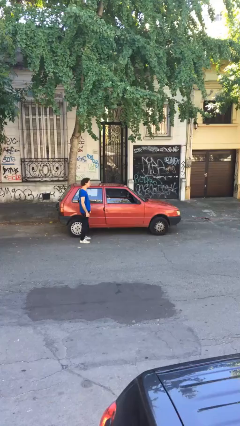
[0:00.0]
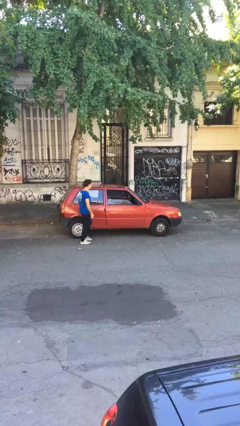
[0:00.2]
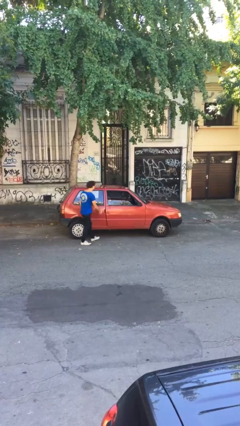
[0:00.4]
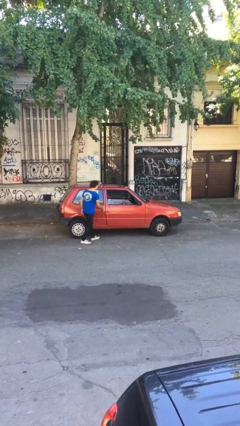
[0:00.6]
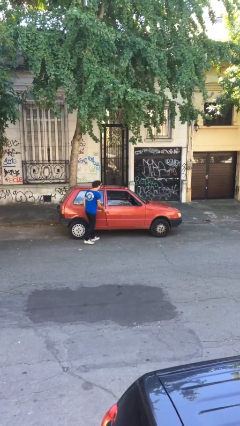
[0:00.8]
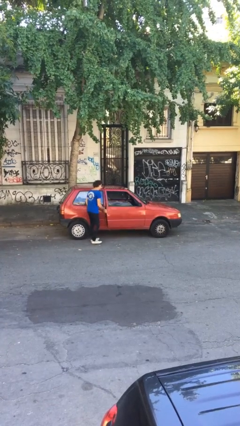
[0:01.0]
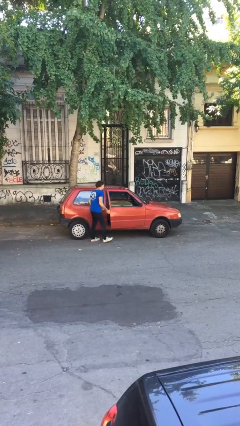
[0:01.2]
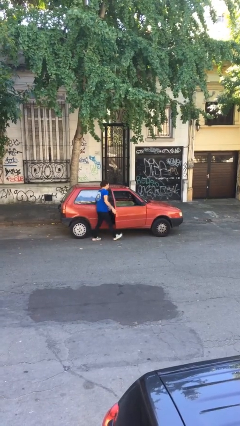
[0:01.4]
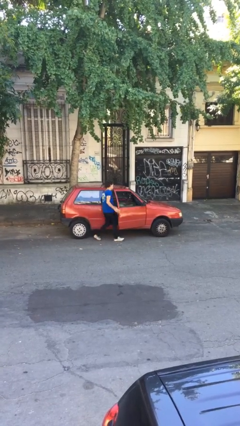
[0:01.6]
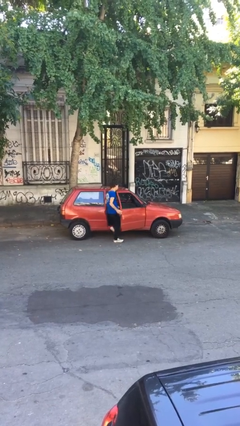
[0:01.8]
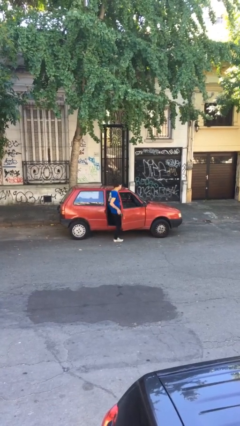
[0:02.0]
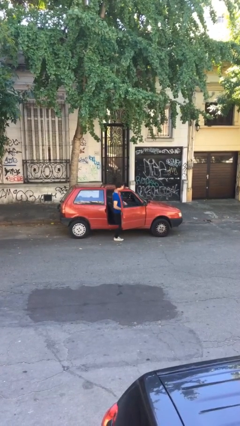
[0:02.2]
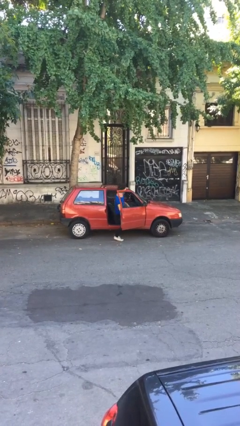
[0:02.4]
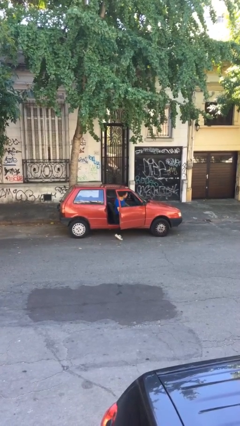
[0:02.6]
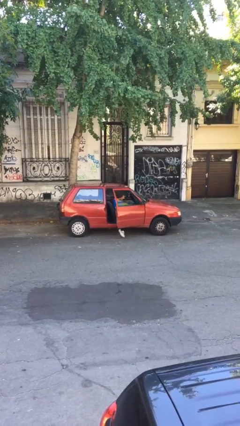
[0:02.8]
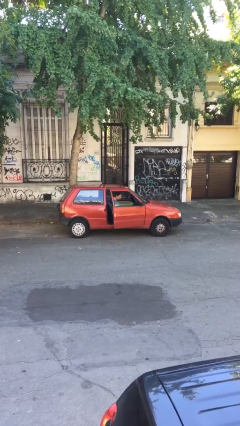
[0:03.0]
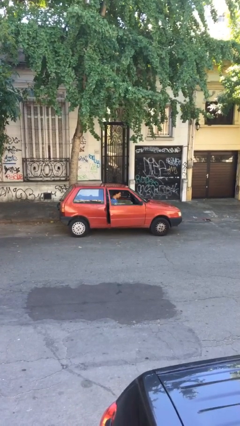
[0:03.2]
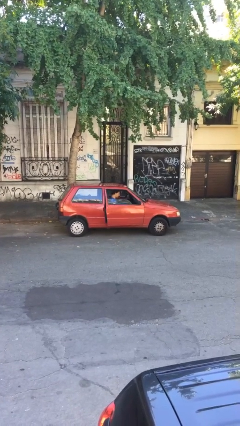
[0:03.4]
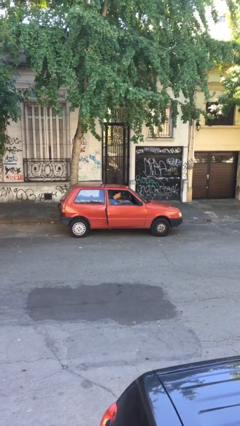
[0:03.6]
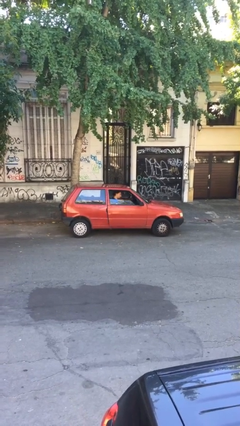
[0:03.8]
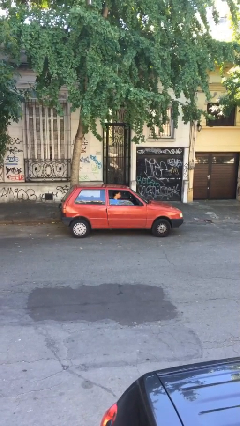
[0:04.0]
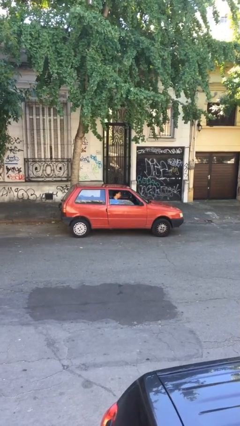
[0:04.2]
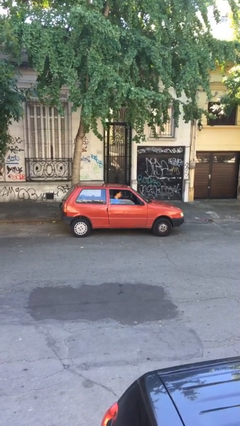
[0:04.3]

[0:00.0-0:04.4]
car picks up person

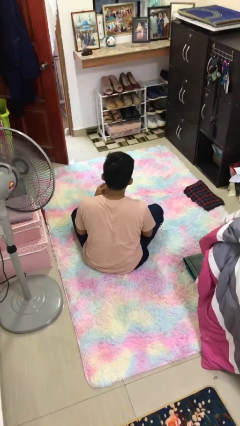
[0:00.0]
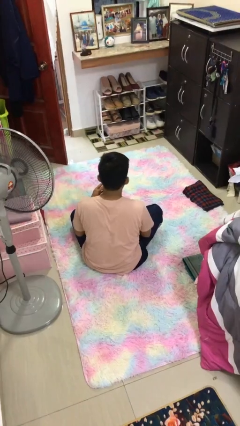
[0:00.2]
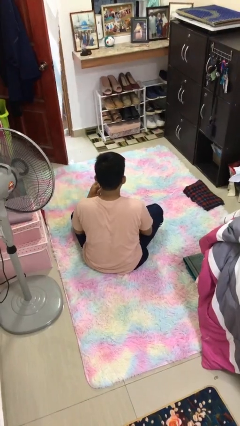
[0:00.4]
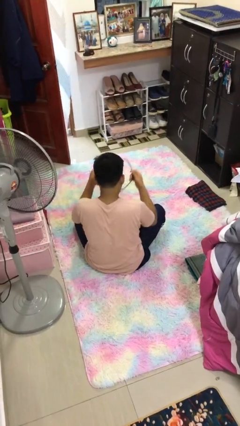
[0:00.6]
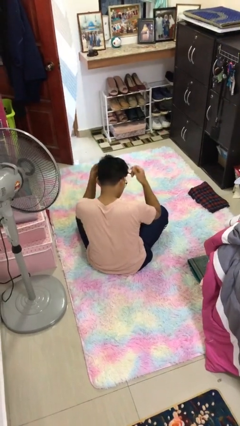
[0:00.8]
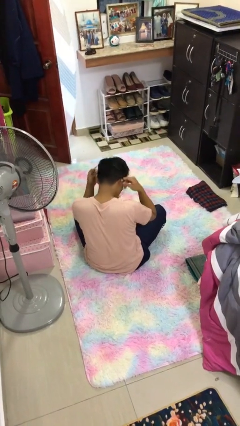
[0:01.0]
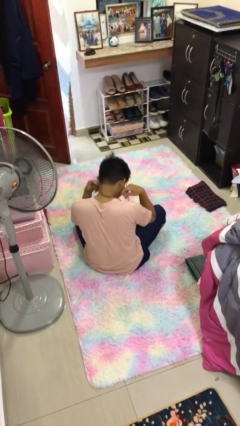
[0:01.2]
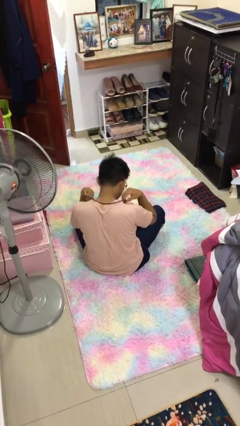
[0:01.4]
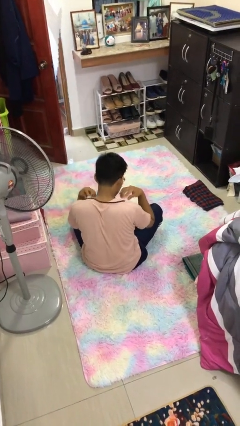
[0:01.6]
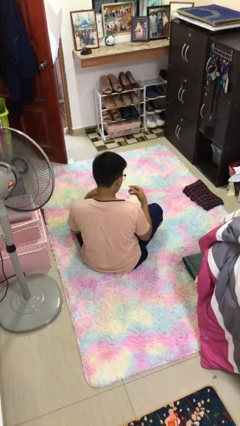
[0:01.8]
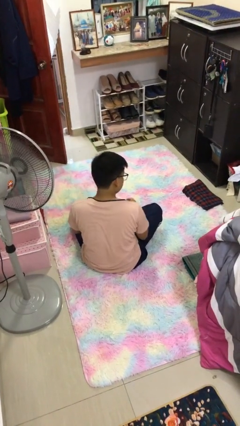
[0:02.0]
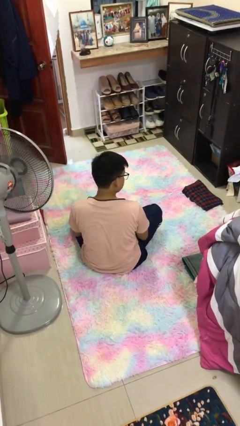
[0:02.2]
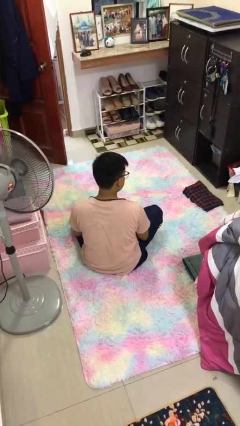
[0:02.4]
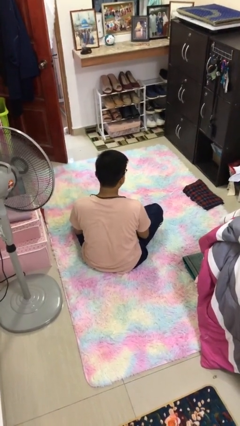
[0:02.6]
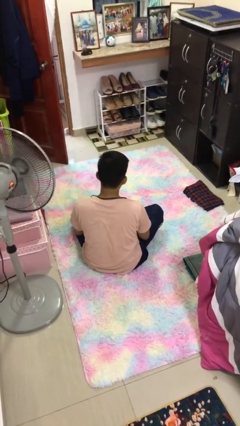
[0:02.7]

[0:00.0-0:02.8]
person puts on necklace

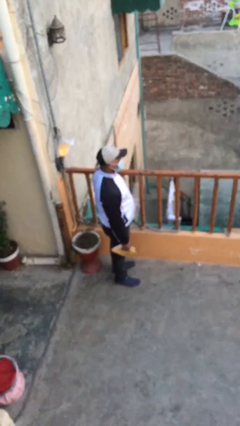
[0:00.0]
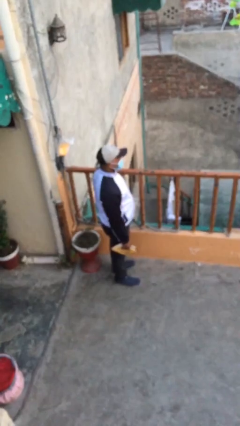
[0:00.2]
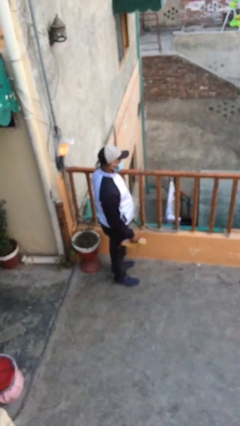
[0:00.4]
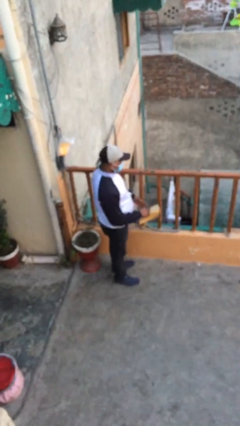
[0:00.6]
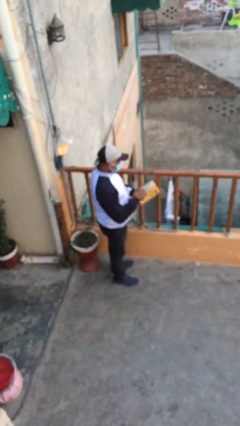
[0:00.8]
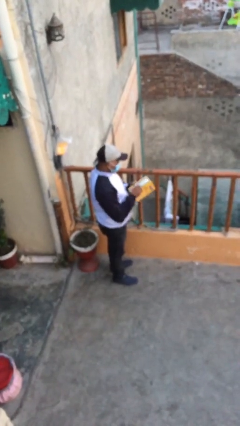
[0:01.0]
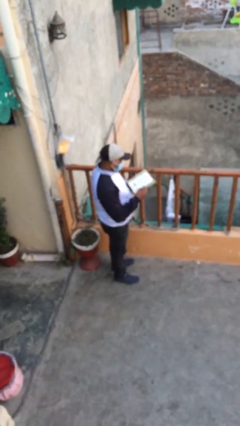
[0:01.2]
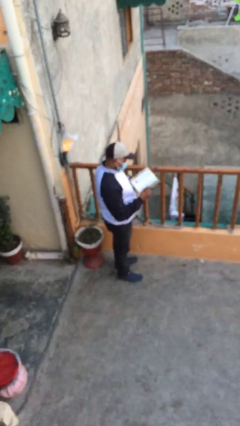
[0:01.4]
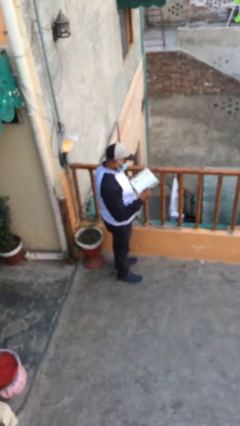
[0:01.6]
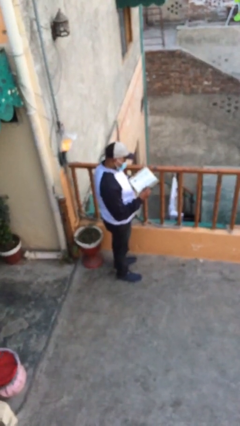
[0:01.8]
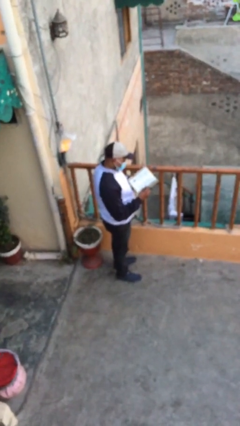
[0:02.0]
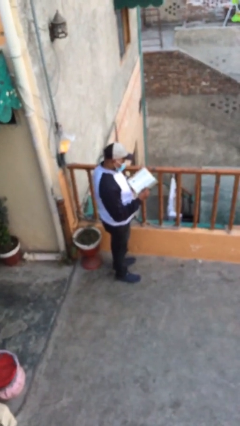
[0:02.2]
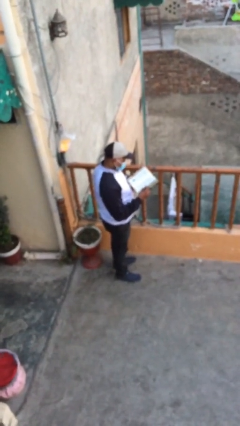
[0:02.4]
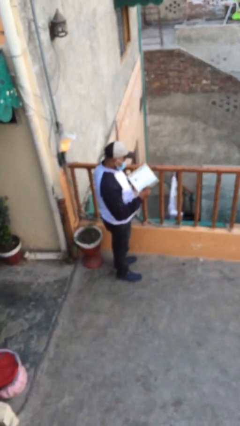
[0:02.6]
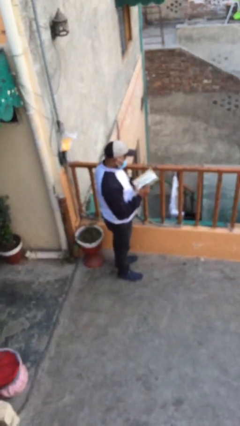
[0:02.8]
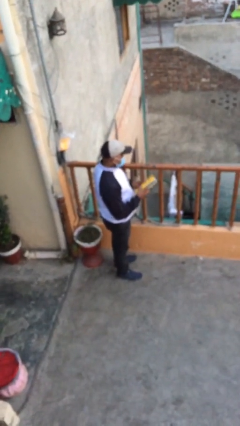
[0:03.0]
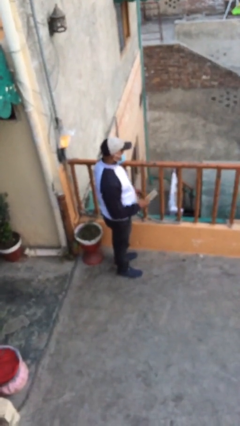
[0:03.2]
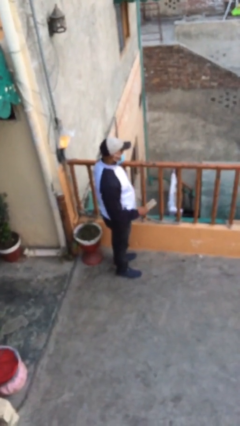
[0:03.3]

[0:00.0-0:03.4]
person reads document

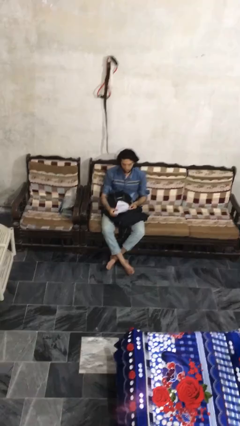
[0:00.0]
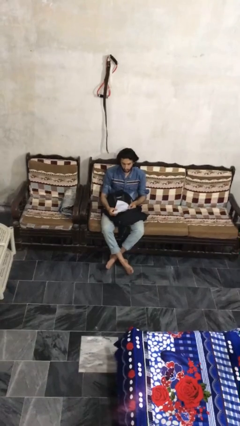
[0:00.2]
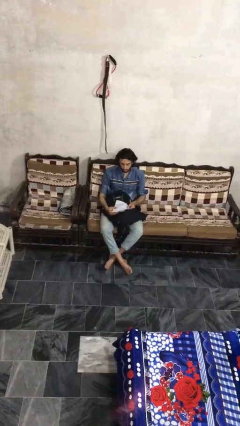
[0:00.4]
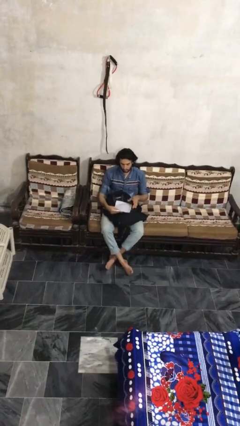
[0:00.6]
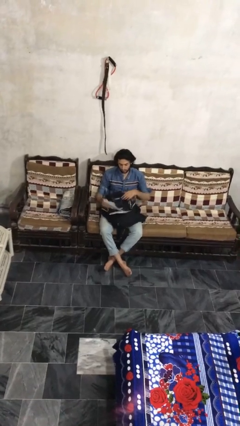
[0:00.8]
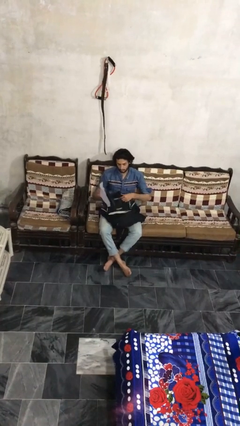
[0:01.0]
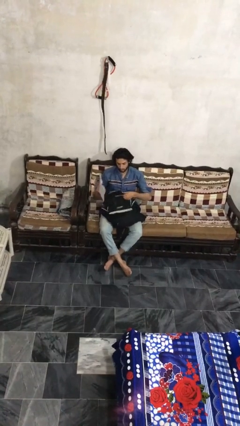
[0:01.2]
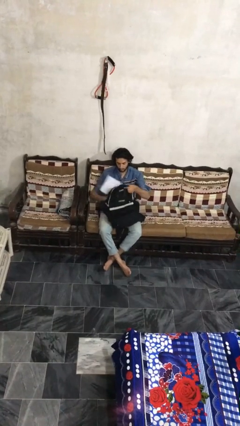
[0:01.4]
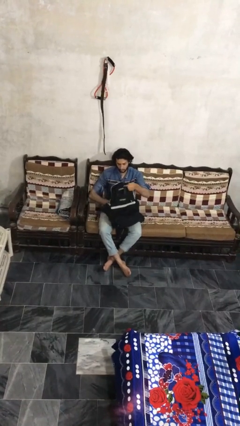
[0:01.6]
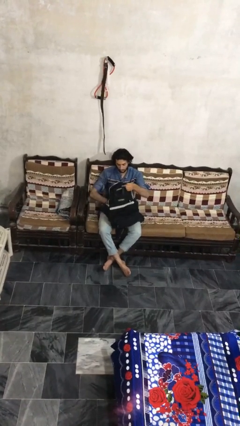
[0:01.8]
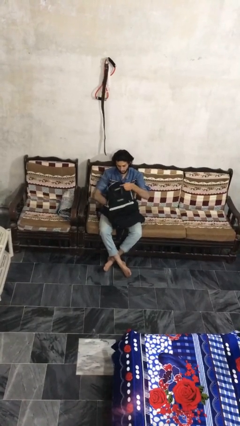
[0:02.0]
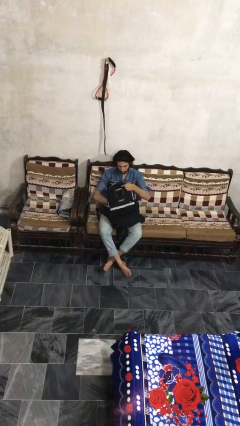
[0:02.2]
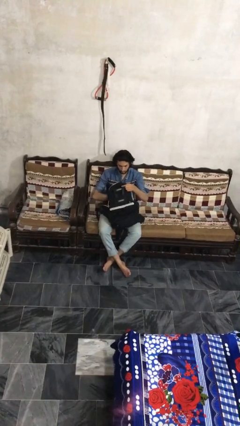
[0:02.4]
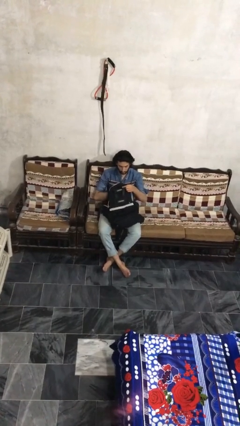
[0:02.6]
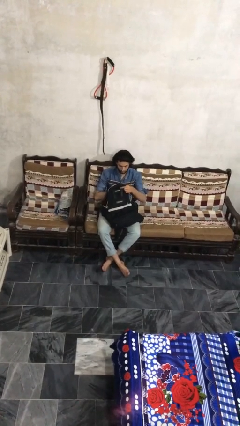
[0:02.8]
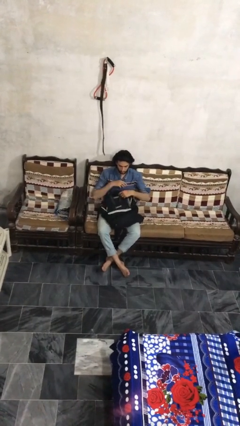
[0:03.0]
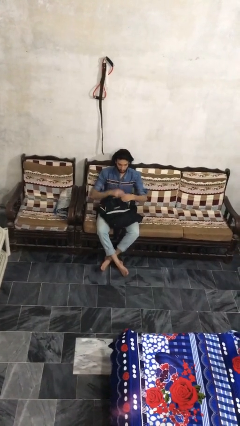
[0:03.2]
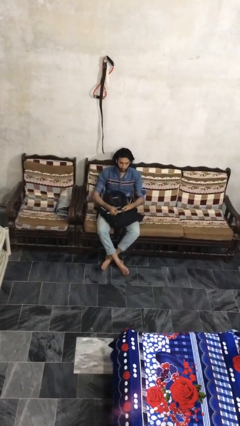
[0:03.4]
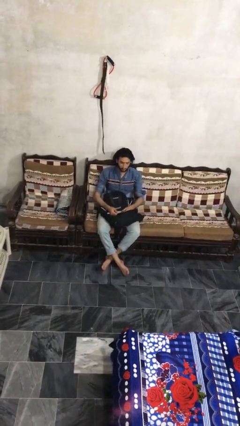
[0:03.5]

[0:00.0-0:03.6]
person puts object into backpack

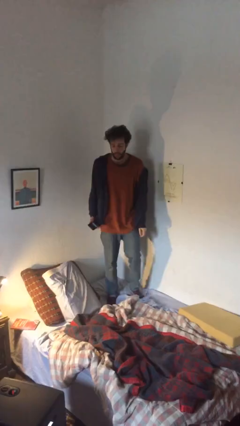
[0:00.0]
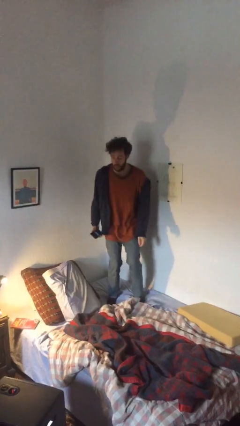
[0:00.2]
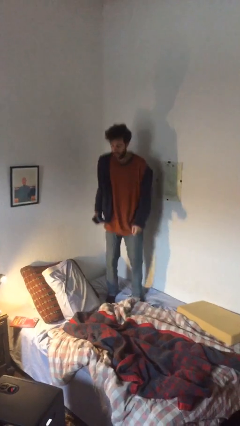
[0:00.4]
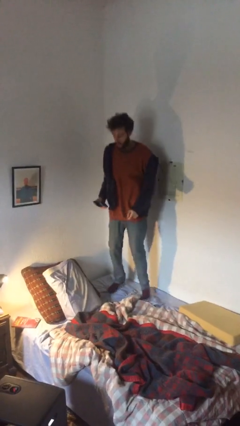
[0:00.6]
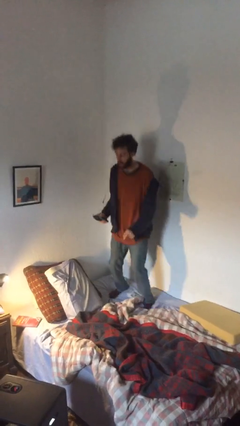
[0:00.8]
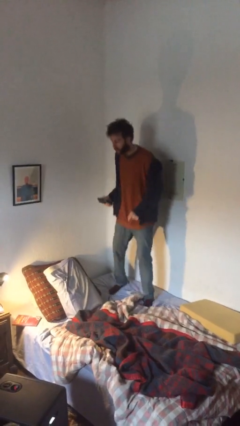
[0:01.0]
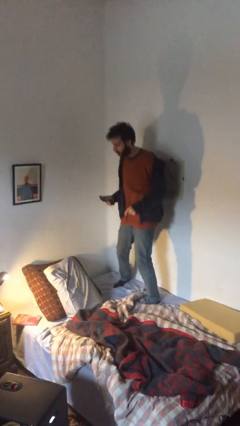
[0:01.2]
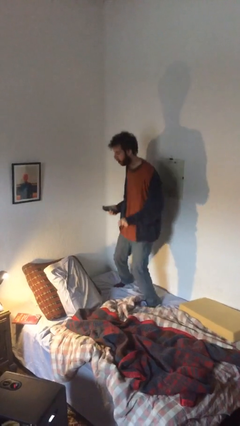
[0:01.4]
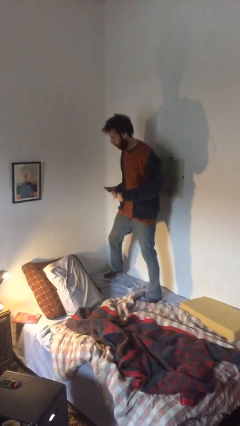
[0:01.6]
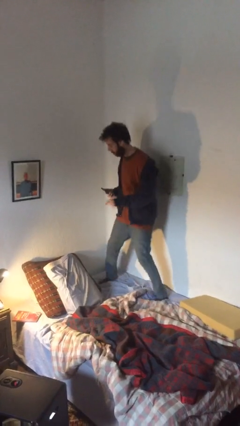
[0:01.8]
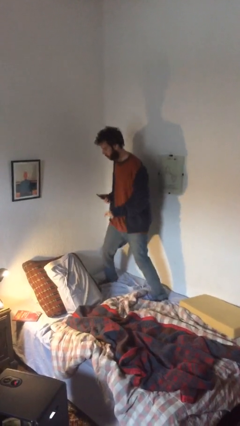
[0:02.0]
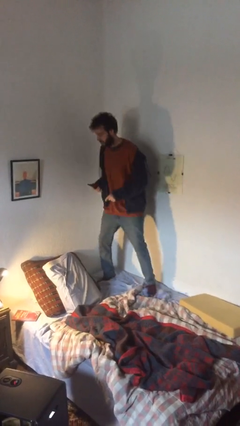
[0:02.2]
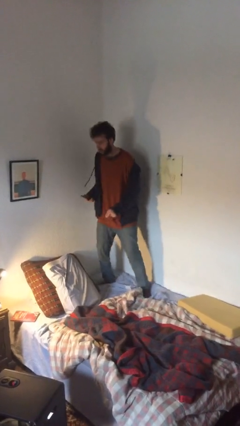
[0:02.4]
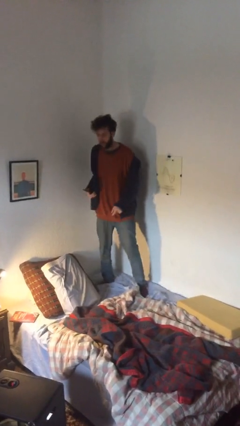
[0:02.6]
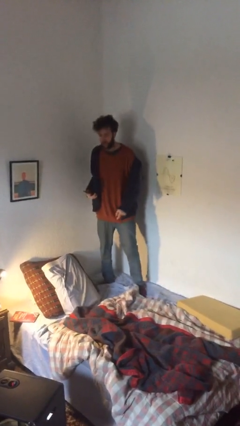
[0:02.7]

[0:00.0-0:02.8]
person jumps on bed

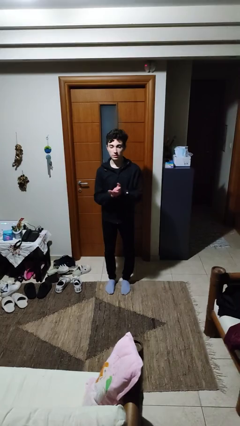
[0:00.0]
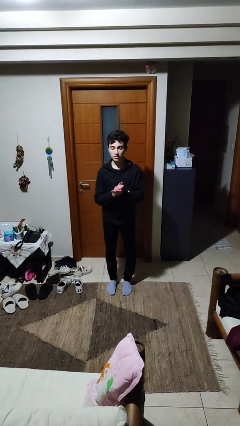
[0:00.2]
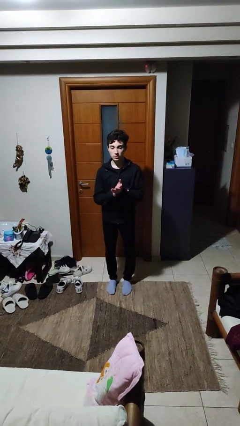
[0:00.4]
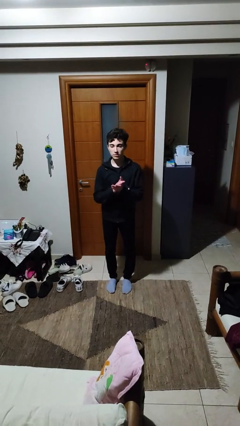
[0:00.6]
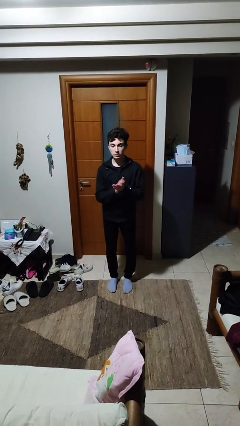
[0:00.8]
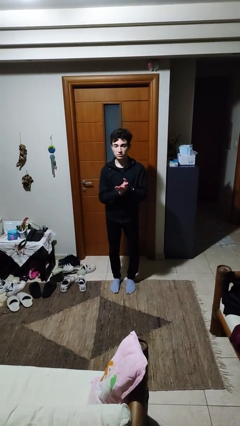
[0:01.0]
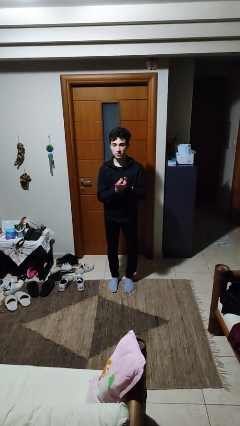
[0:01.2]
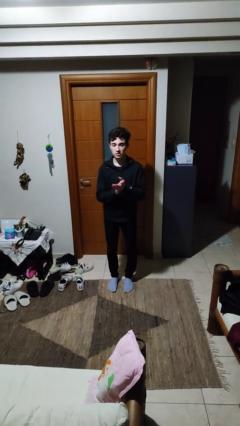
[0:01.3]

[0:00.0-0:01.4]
person claps hands
